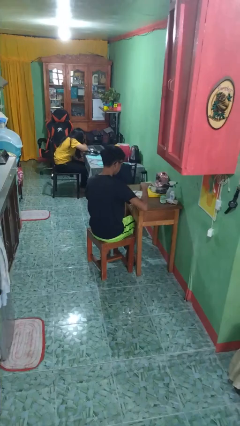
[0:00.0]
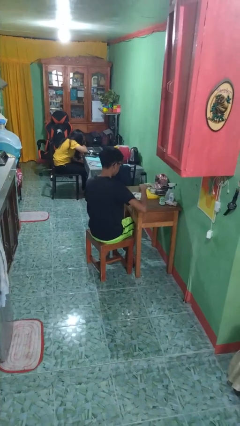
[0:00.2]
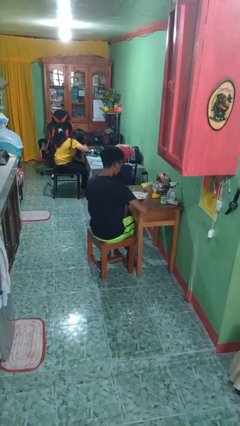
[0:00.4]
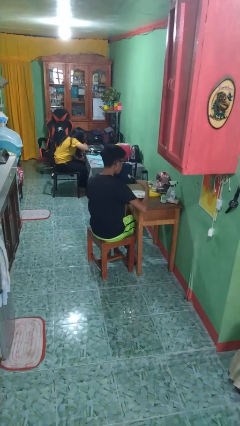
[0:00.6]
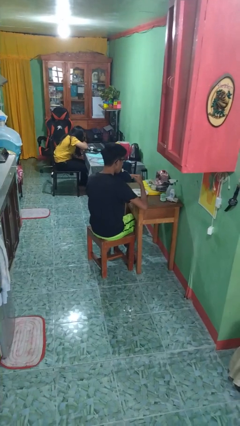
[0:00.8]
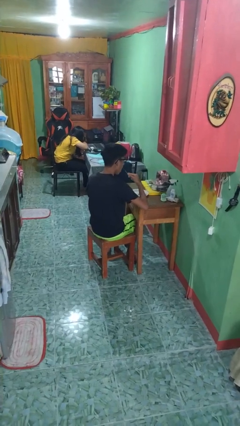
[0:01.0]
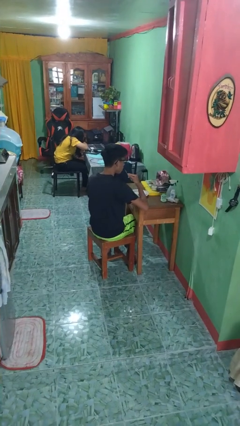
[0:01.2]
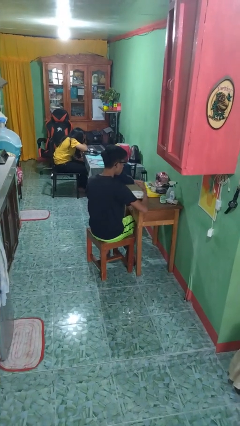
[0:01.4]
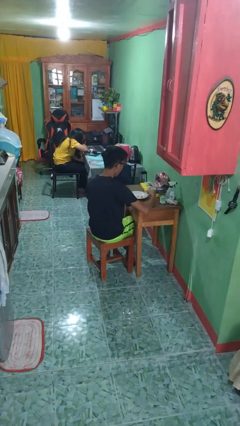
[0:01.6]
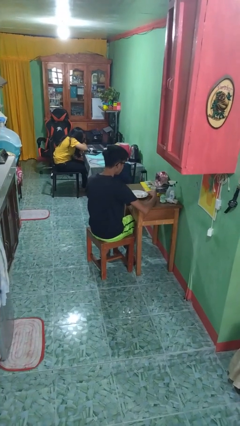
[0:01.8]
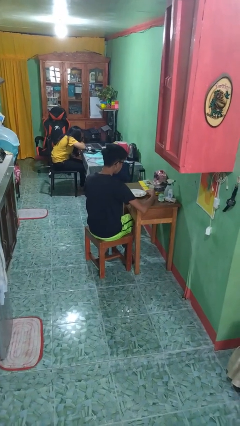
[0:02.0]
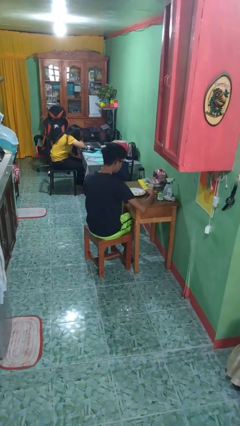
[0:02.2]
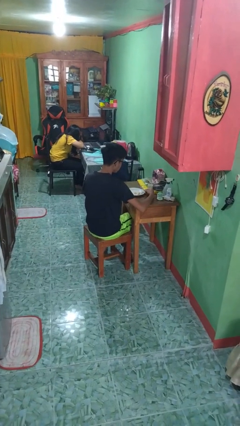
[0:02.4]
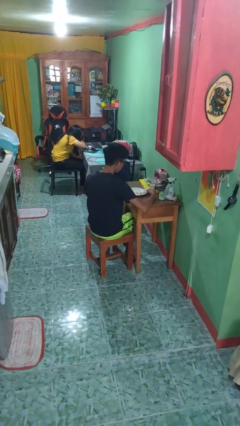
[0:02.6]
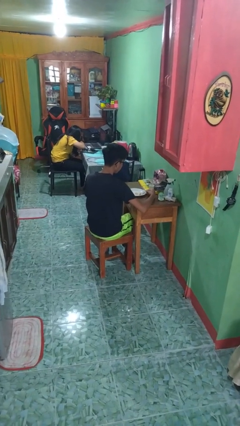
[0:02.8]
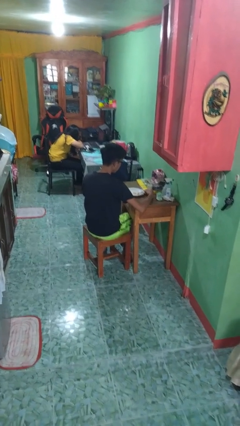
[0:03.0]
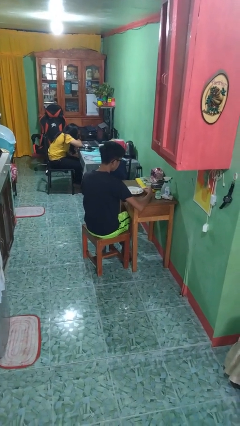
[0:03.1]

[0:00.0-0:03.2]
person eats with utensil

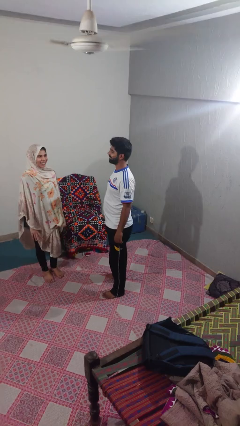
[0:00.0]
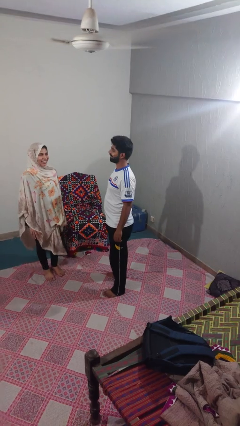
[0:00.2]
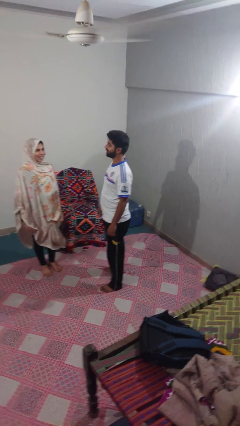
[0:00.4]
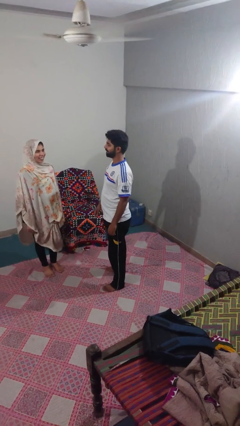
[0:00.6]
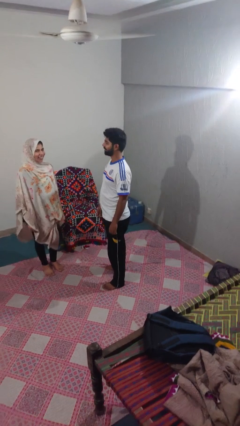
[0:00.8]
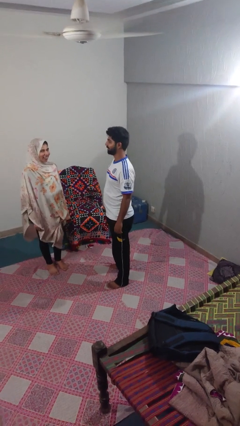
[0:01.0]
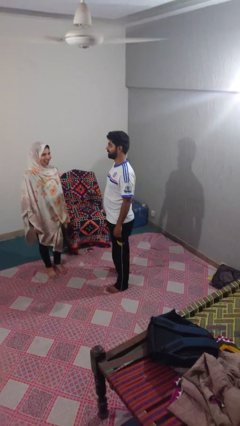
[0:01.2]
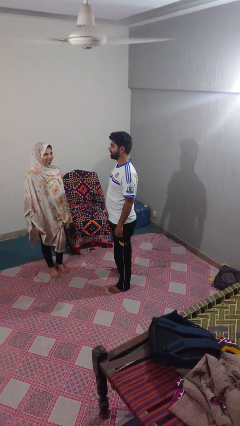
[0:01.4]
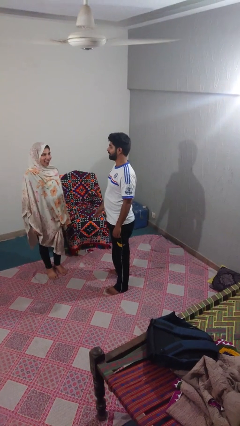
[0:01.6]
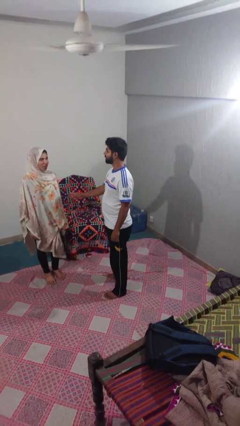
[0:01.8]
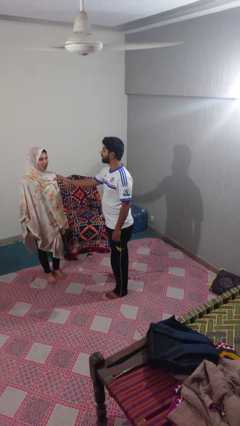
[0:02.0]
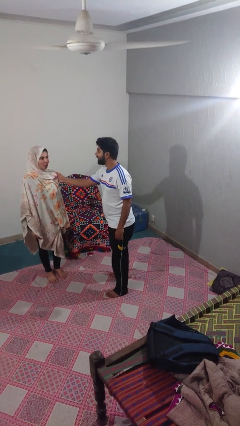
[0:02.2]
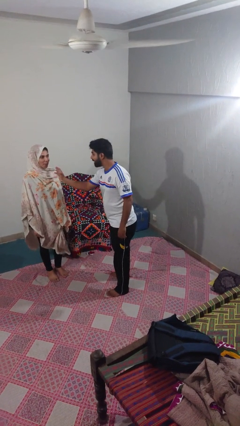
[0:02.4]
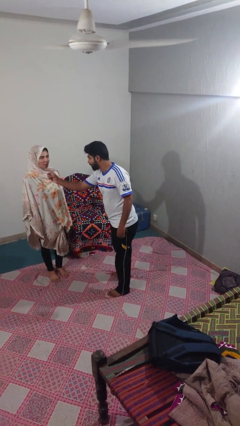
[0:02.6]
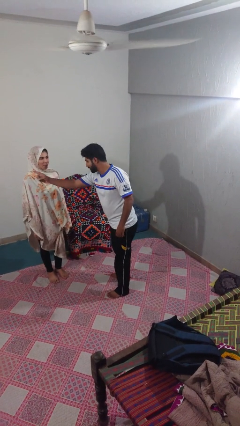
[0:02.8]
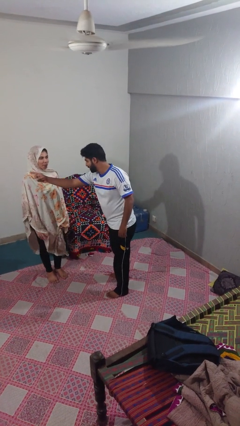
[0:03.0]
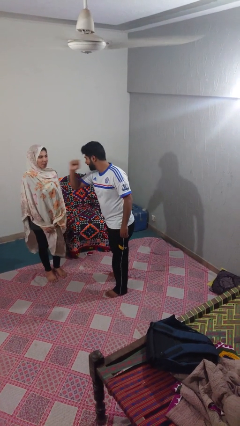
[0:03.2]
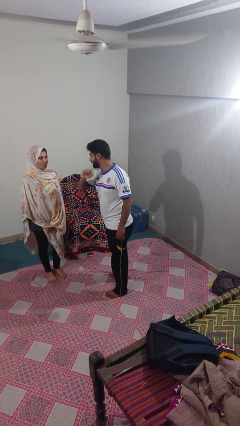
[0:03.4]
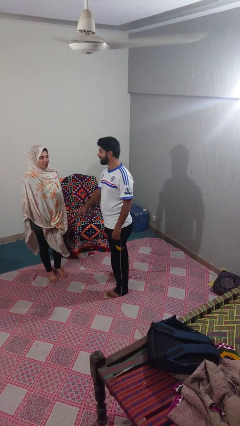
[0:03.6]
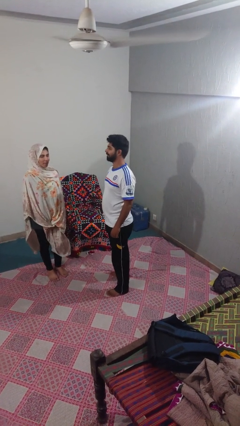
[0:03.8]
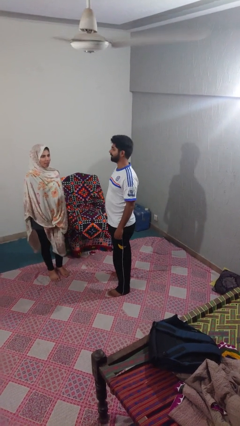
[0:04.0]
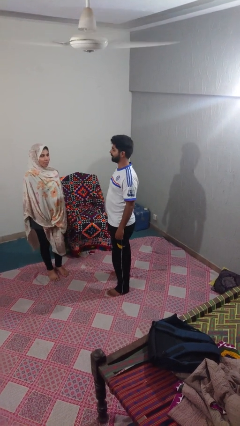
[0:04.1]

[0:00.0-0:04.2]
person shoves person

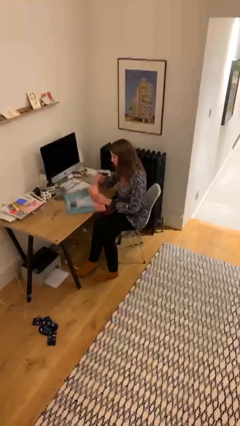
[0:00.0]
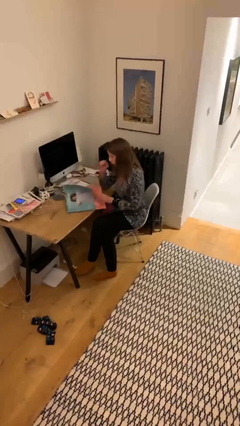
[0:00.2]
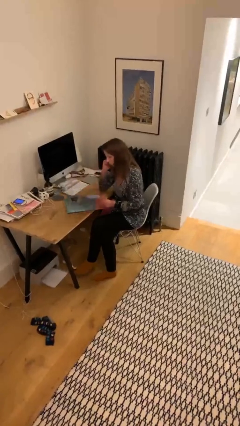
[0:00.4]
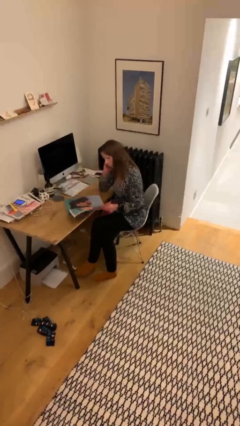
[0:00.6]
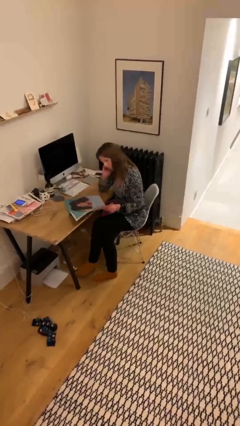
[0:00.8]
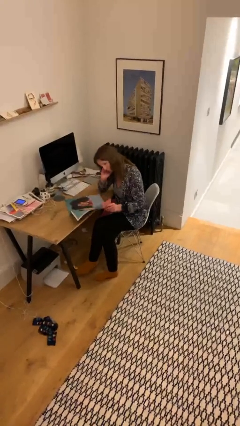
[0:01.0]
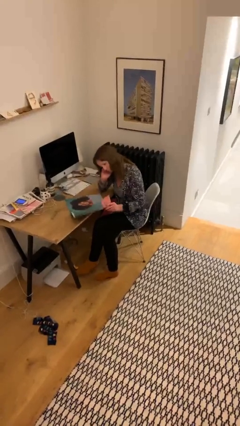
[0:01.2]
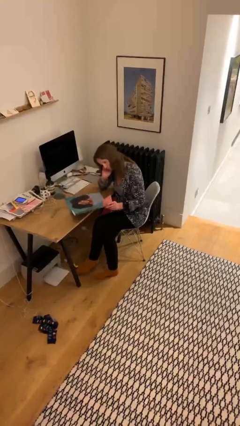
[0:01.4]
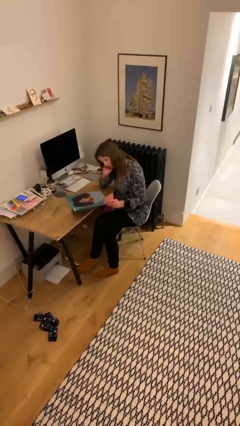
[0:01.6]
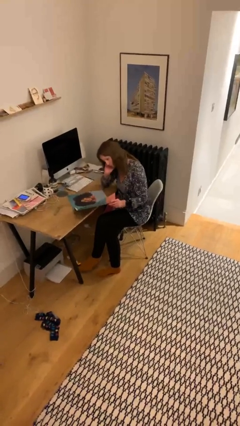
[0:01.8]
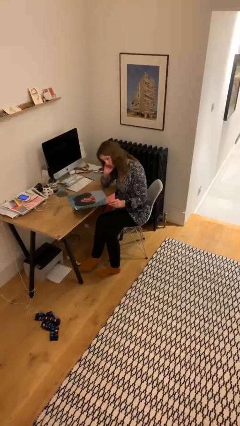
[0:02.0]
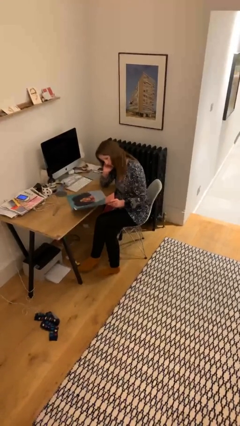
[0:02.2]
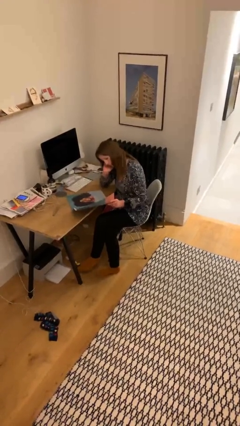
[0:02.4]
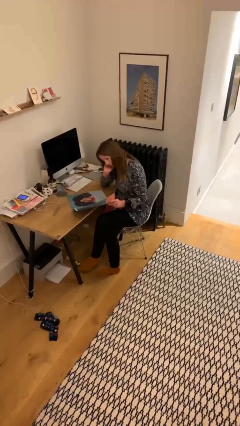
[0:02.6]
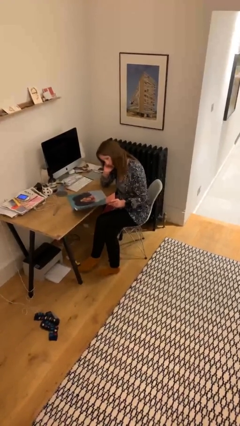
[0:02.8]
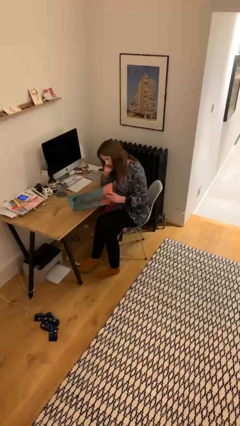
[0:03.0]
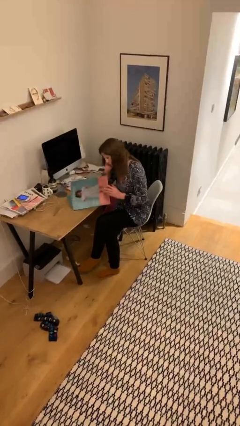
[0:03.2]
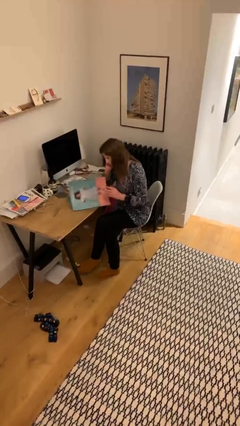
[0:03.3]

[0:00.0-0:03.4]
person reads document

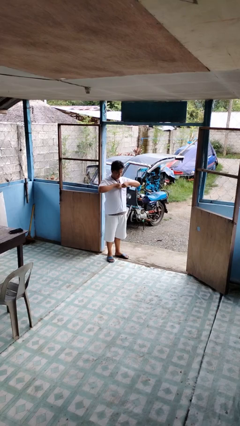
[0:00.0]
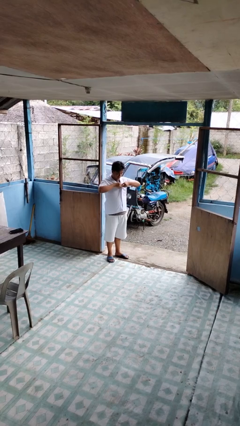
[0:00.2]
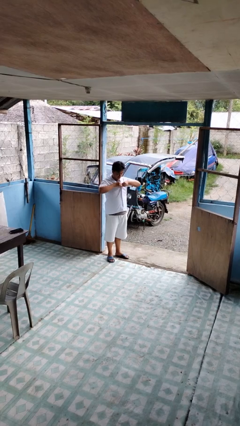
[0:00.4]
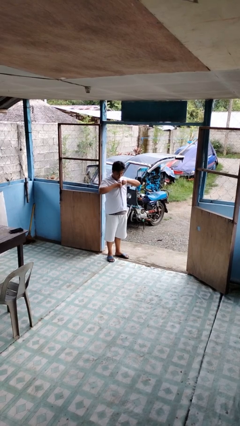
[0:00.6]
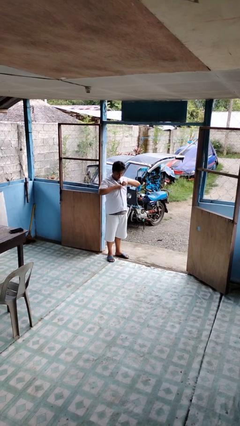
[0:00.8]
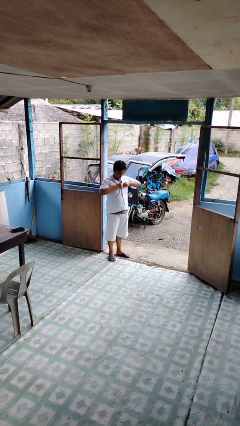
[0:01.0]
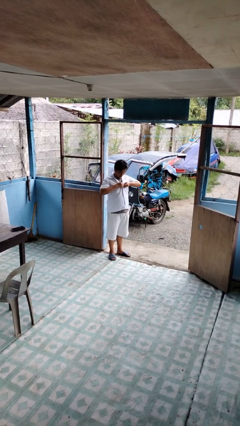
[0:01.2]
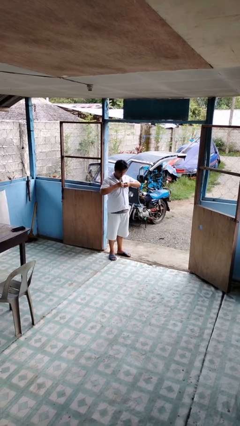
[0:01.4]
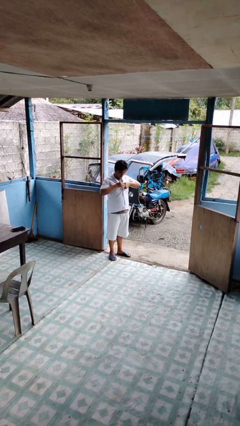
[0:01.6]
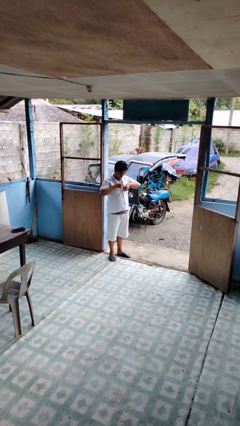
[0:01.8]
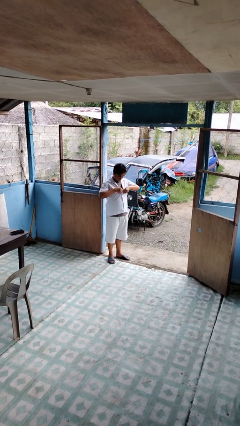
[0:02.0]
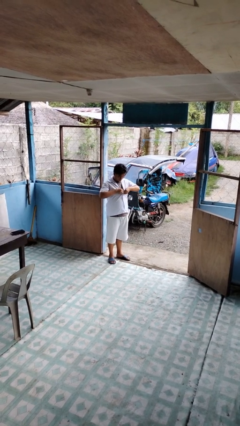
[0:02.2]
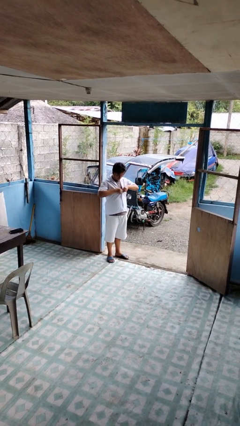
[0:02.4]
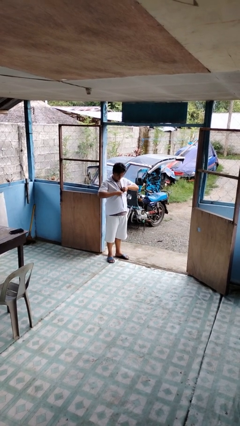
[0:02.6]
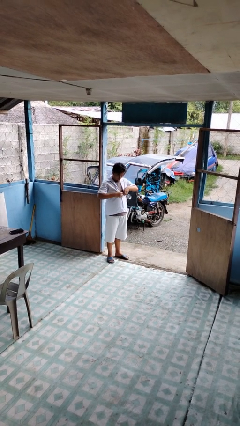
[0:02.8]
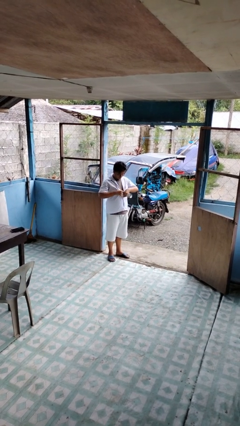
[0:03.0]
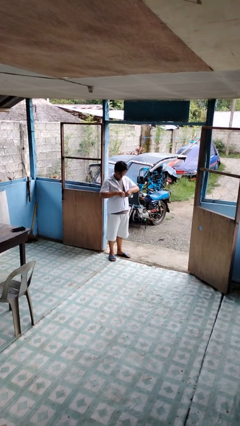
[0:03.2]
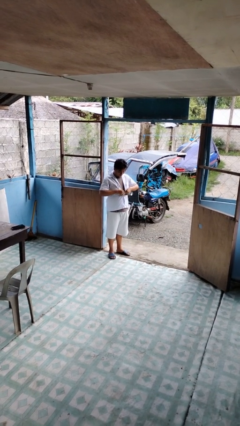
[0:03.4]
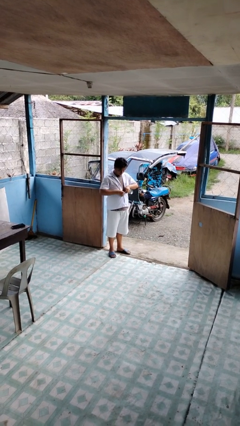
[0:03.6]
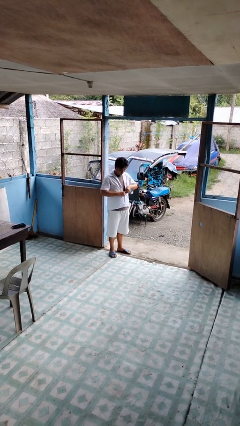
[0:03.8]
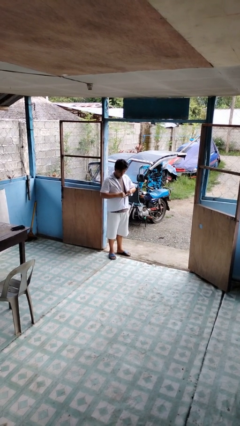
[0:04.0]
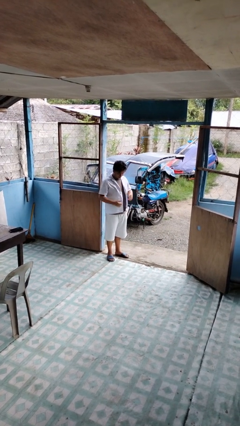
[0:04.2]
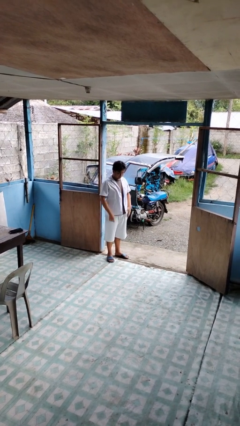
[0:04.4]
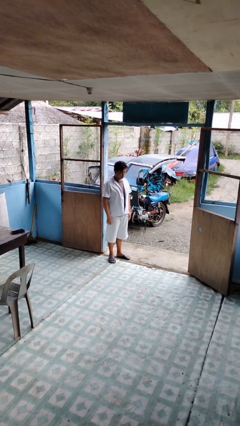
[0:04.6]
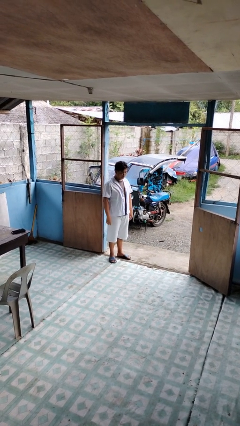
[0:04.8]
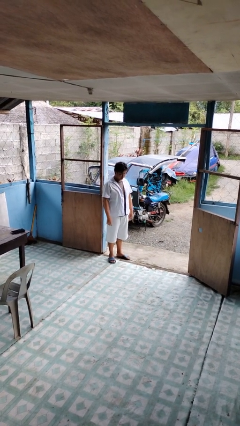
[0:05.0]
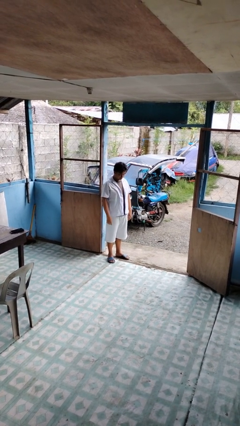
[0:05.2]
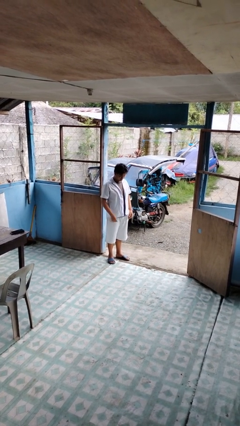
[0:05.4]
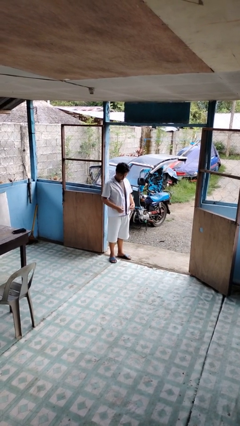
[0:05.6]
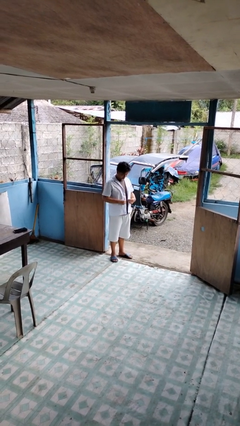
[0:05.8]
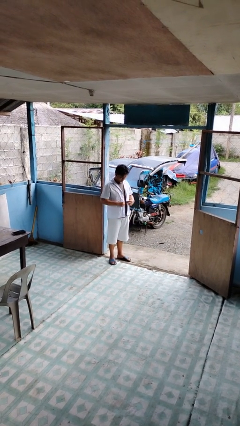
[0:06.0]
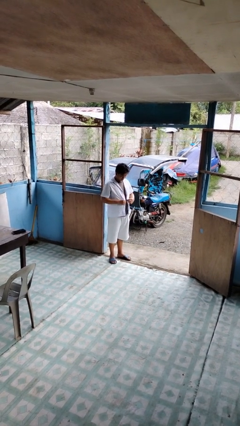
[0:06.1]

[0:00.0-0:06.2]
person unbuttons shirt

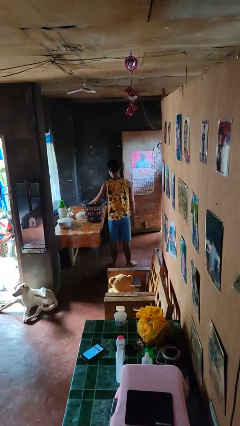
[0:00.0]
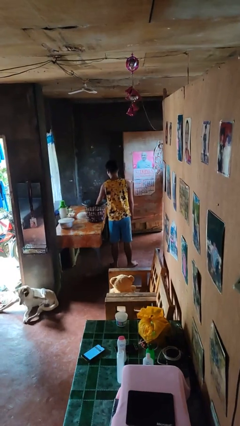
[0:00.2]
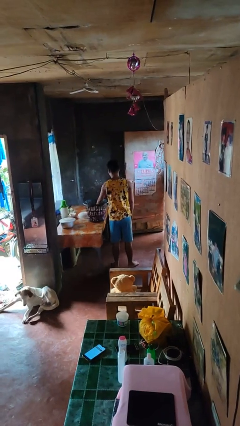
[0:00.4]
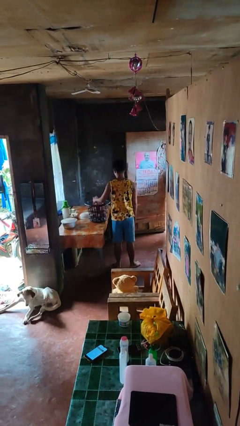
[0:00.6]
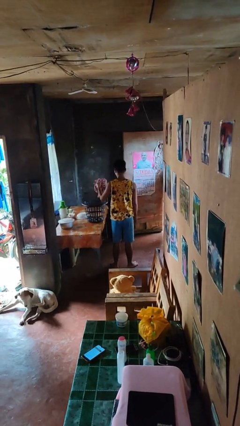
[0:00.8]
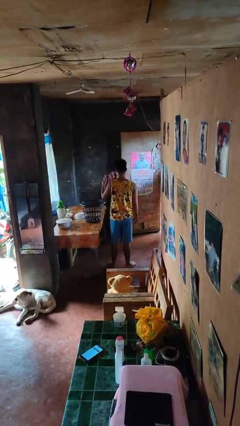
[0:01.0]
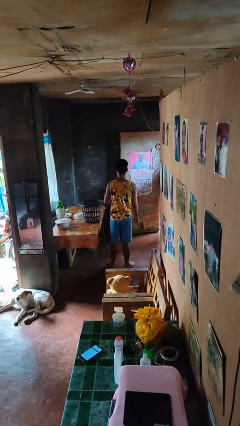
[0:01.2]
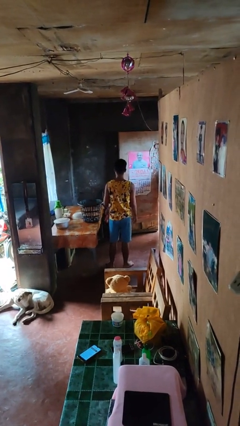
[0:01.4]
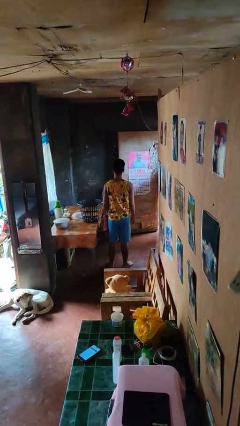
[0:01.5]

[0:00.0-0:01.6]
person takes object from basket
